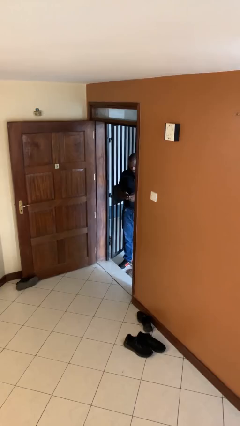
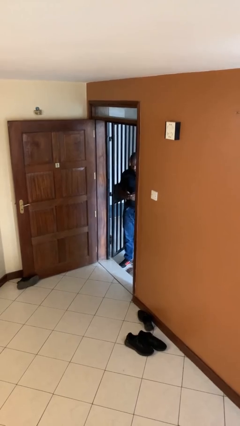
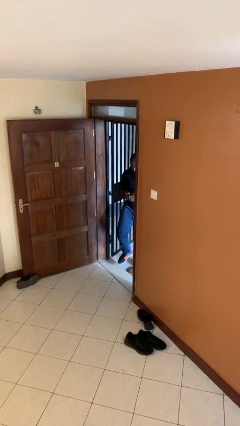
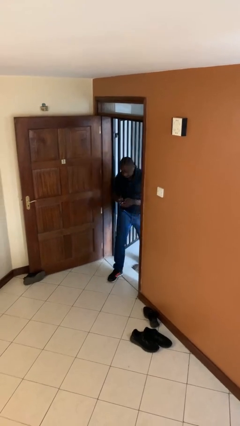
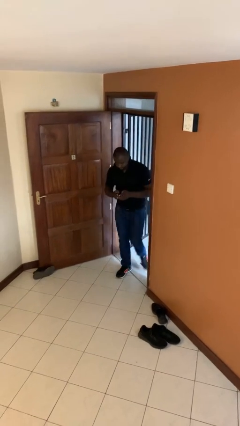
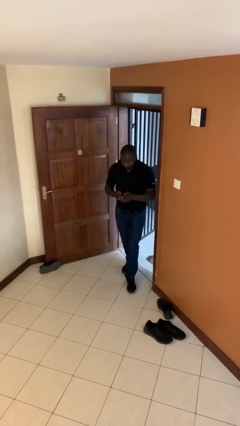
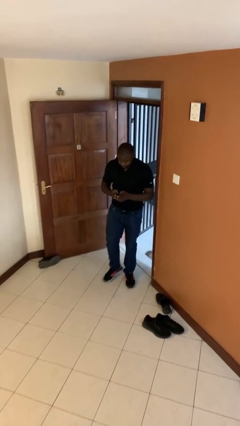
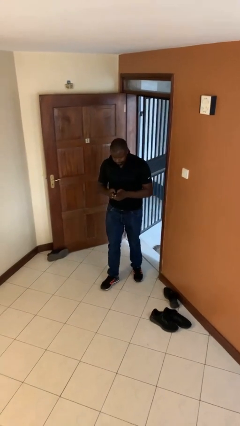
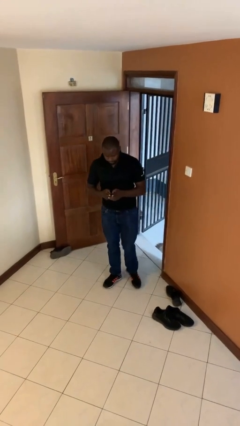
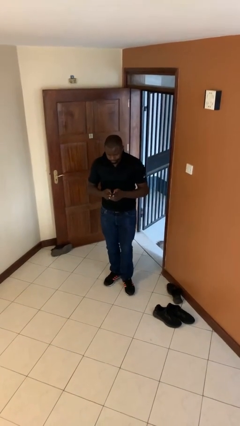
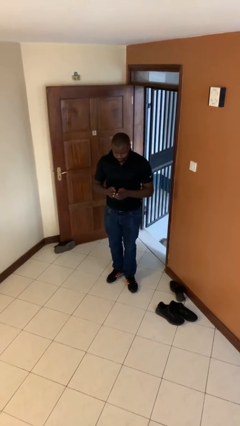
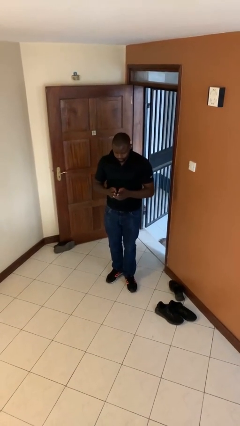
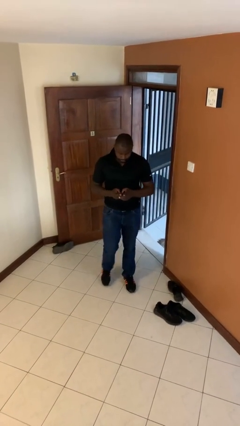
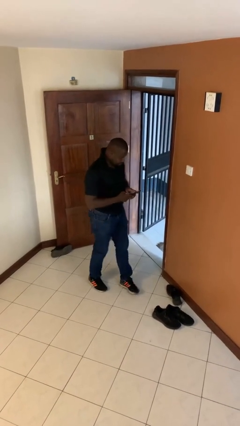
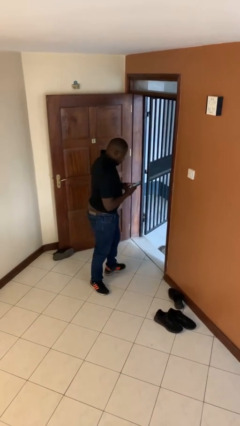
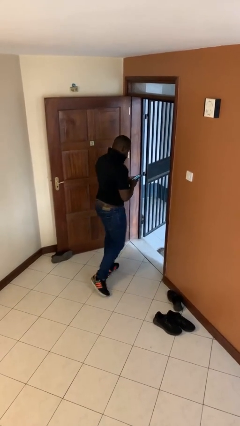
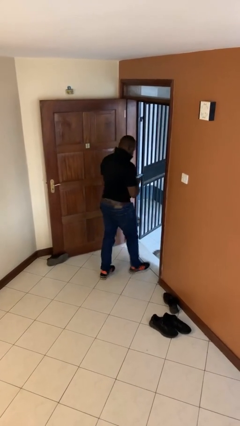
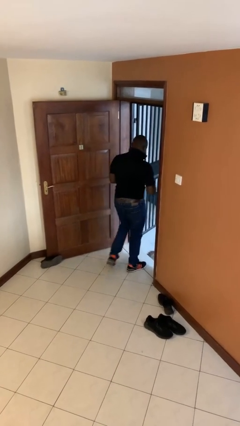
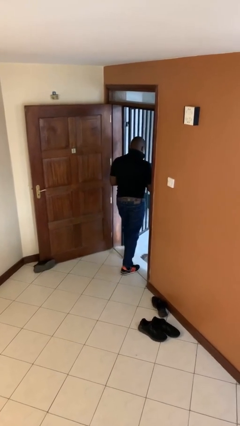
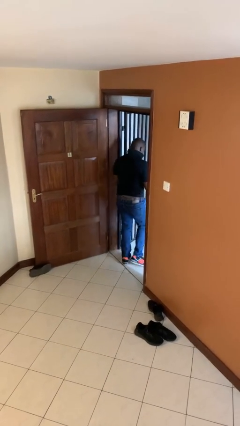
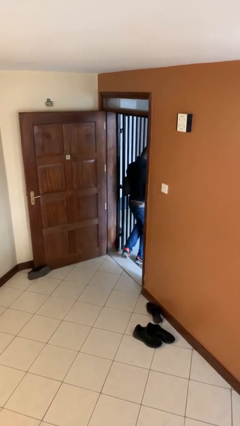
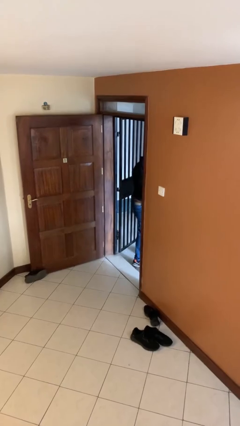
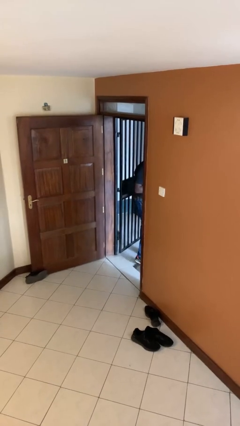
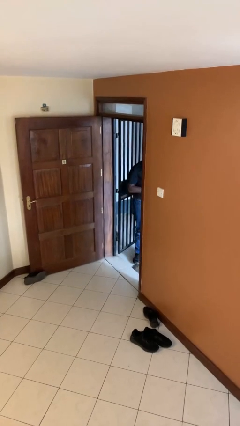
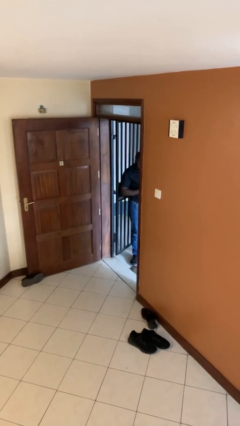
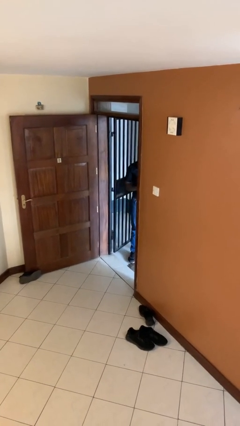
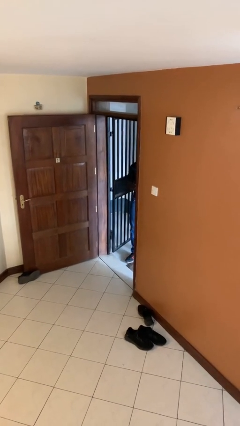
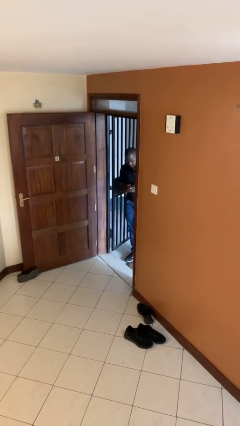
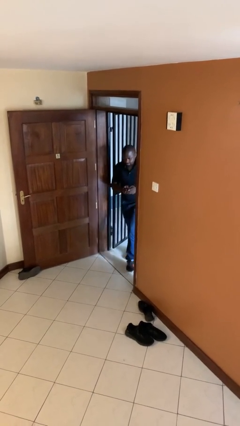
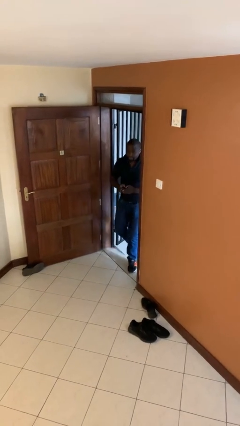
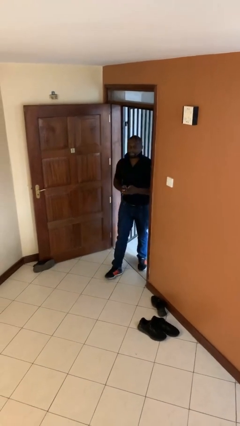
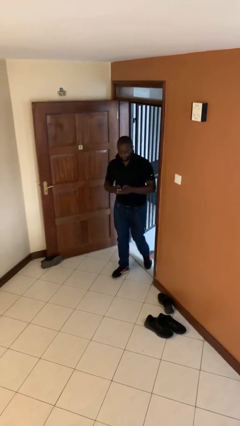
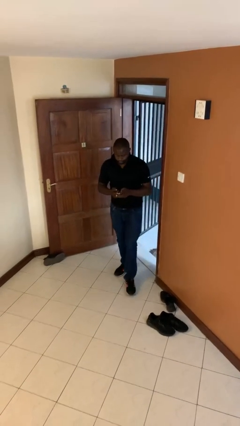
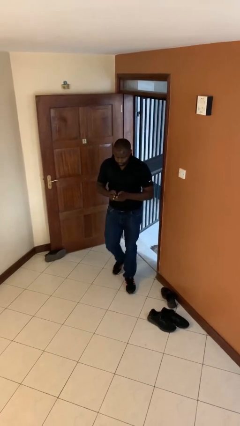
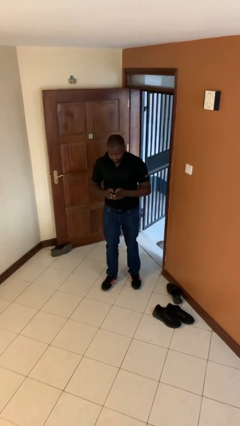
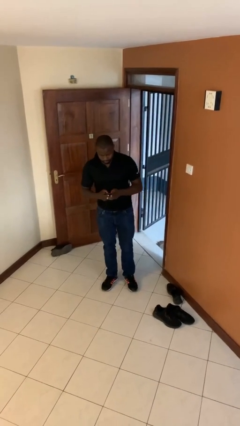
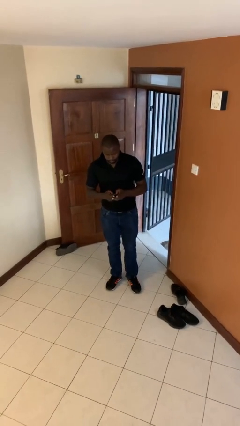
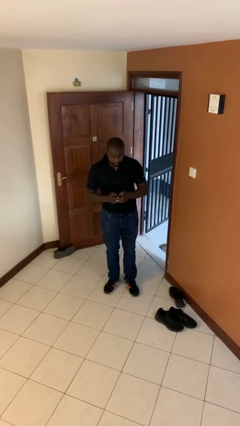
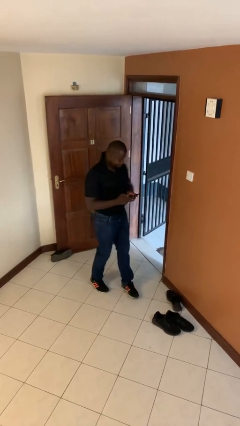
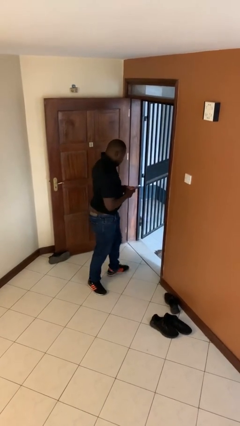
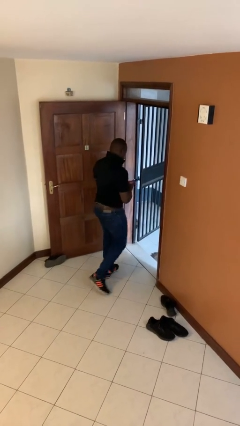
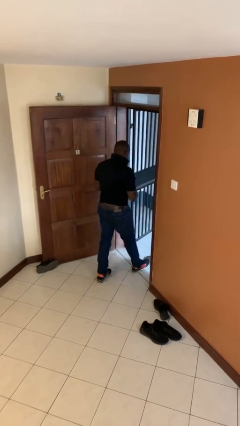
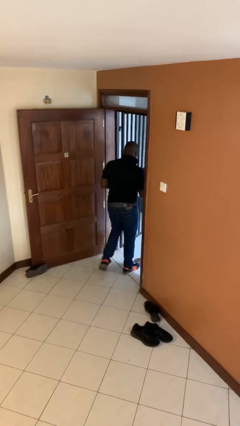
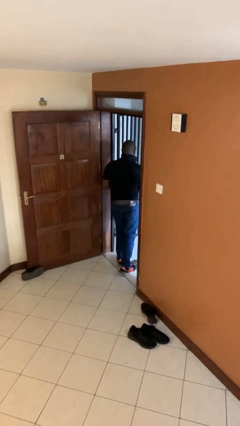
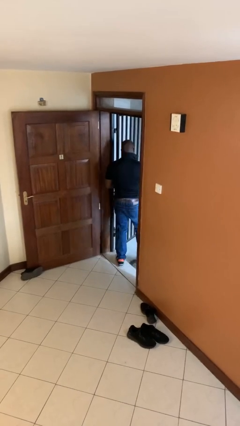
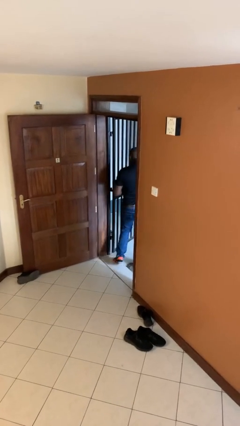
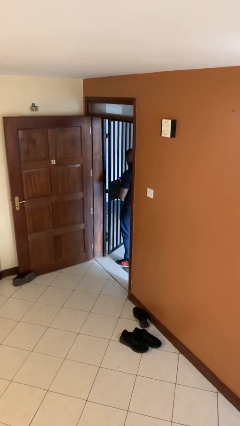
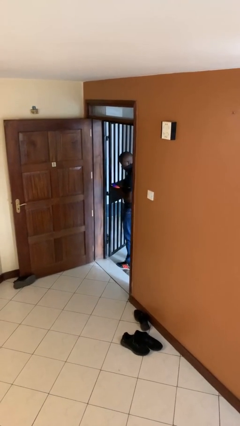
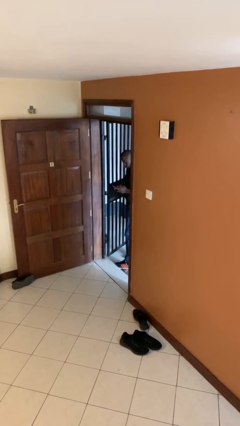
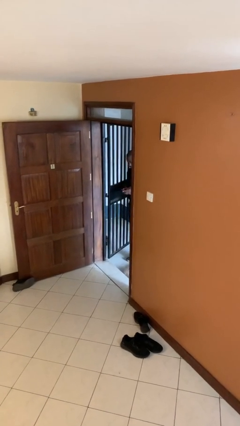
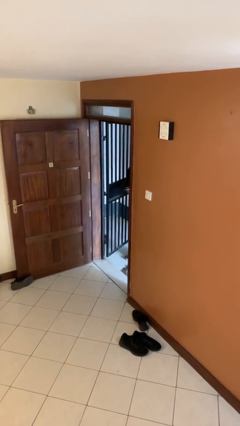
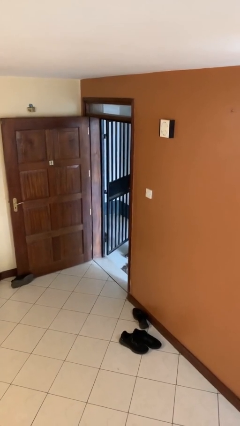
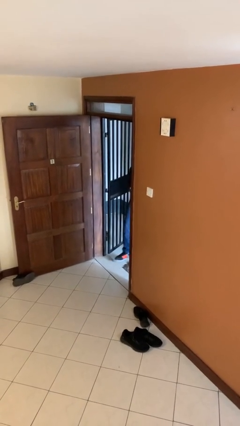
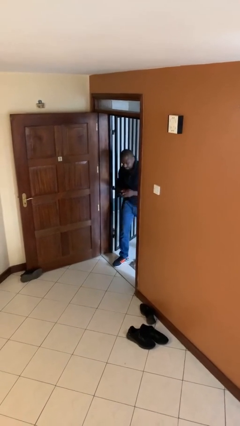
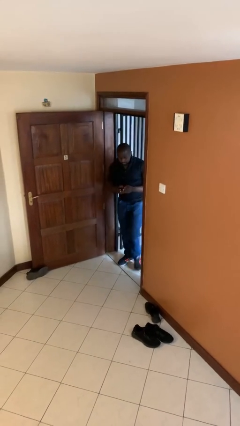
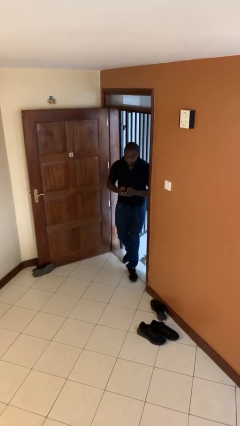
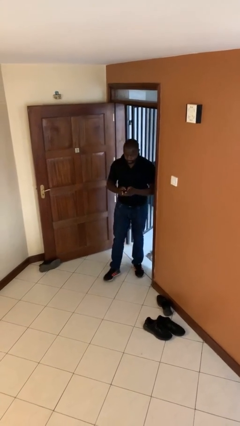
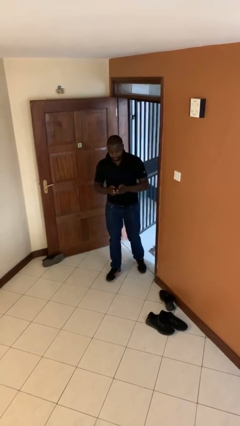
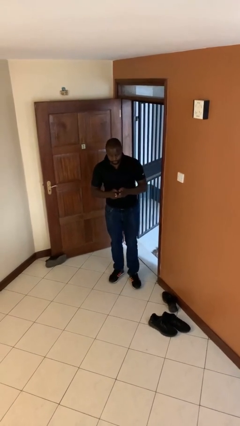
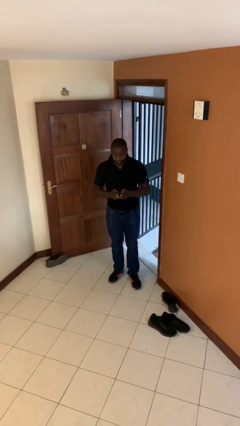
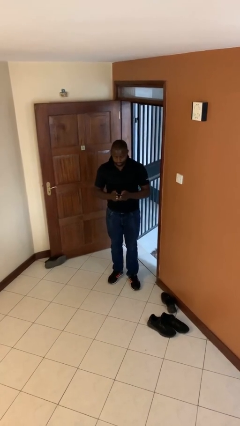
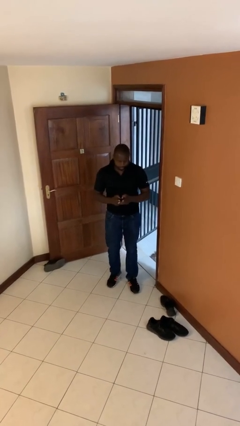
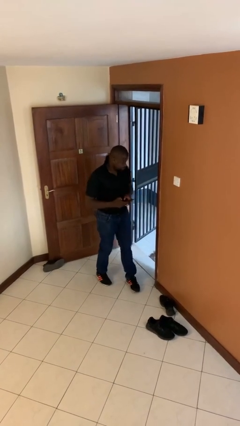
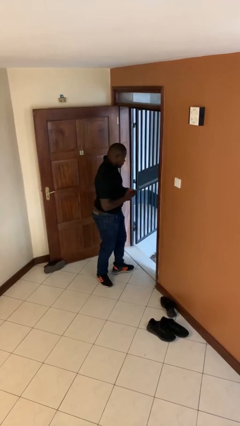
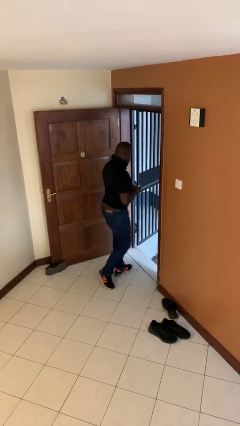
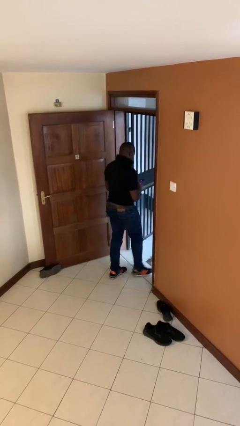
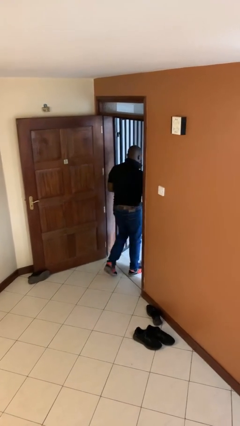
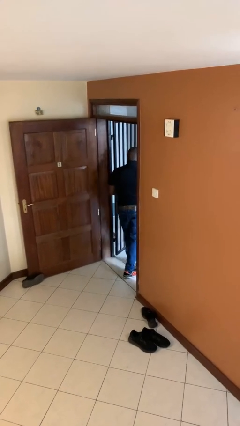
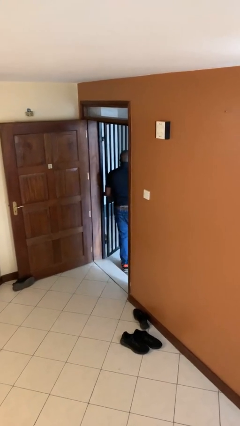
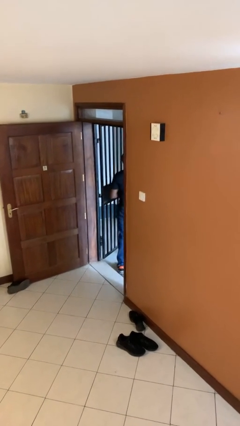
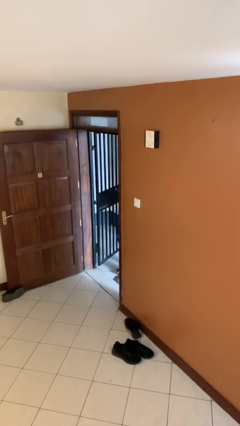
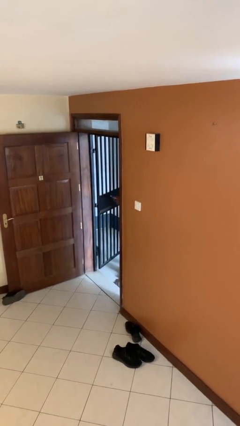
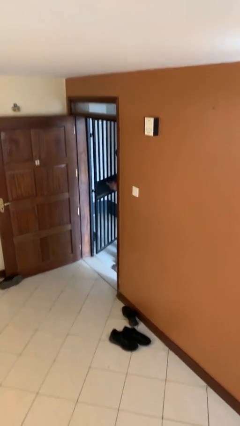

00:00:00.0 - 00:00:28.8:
person texts on phone

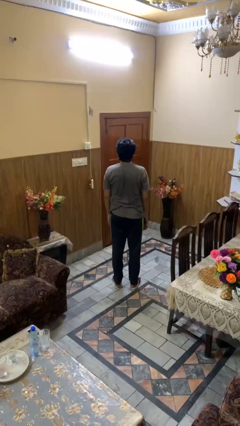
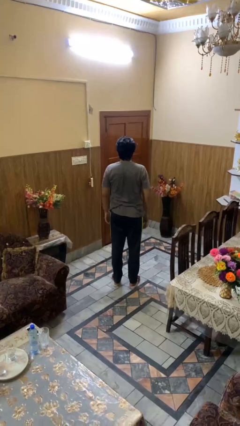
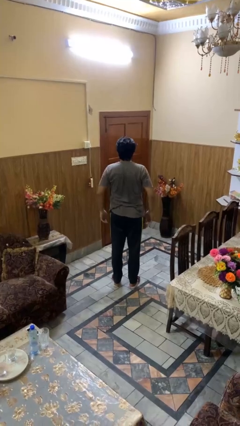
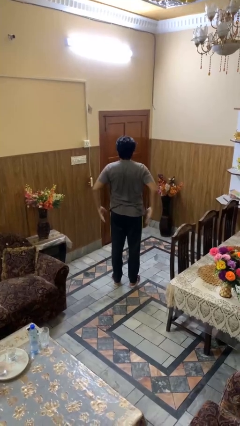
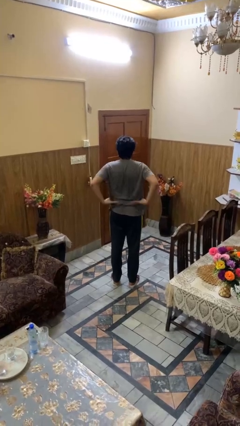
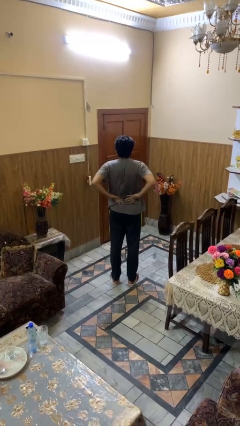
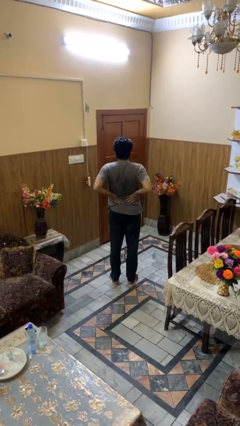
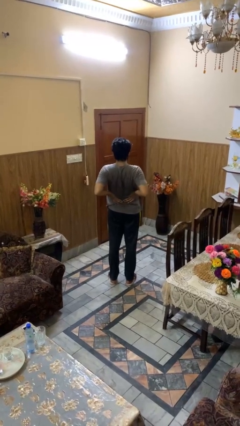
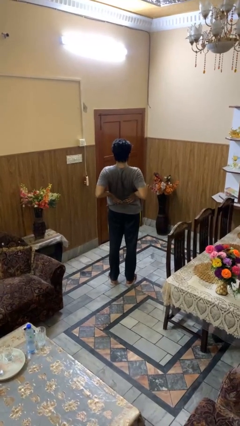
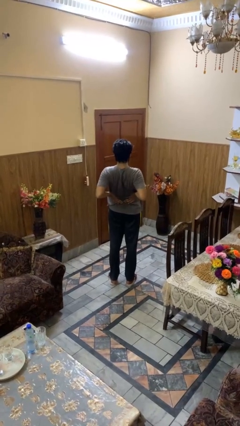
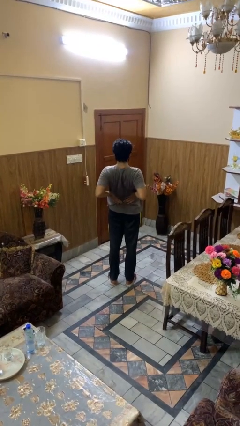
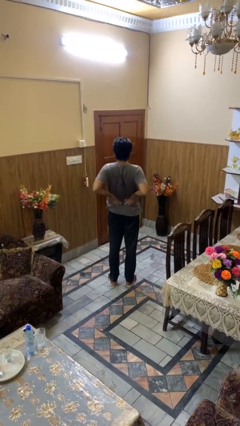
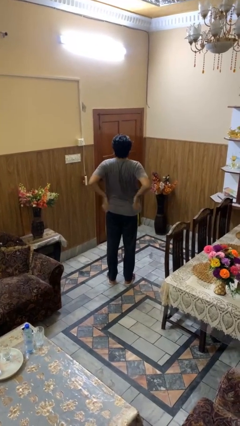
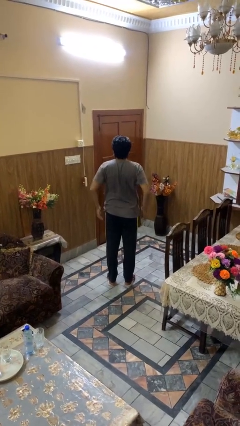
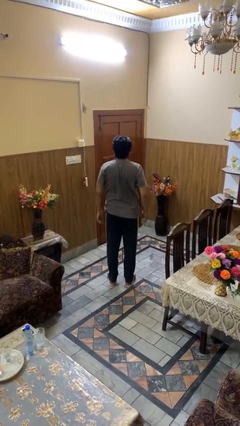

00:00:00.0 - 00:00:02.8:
person stretches back

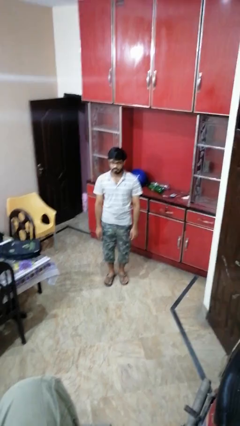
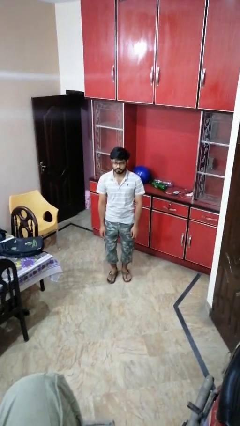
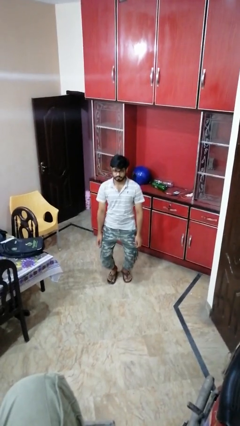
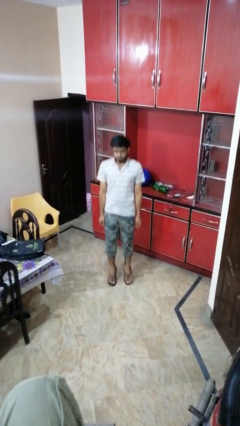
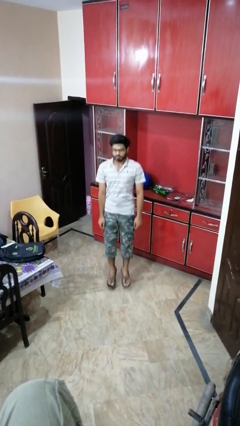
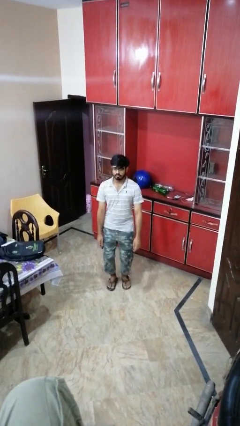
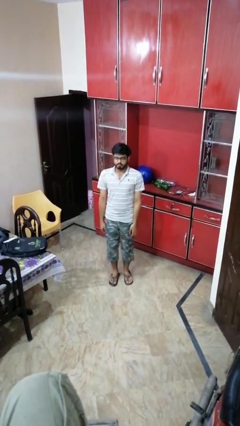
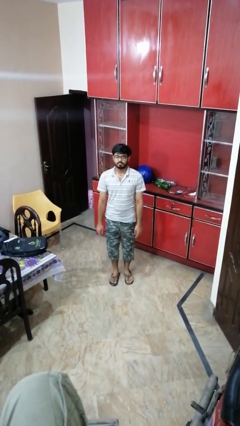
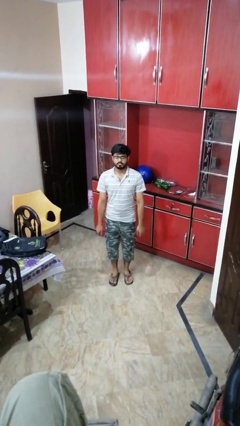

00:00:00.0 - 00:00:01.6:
person jumps
